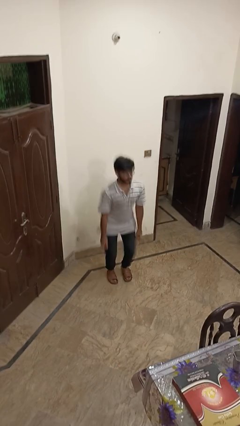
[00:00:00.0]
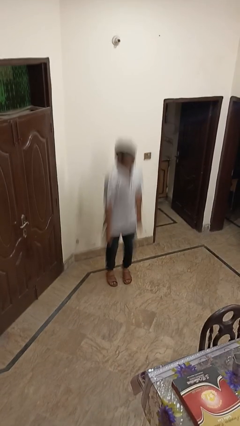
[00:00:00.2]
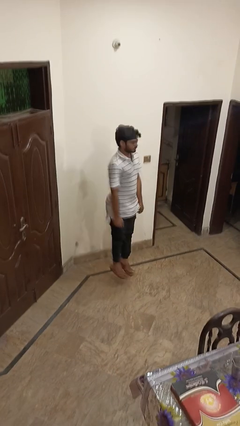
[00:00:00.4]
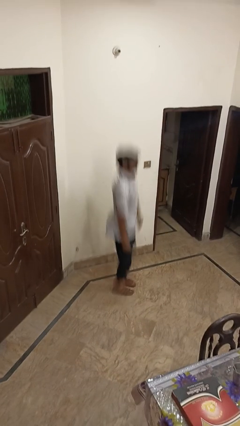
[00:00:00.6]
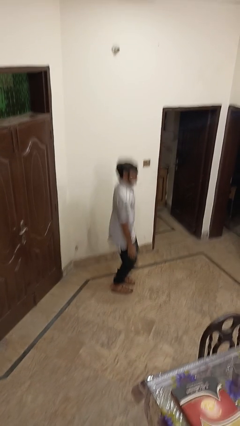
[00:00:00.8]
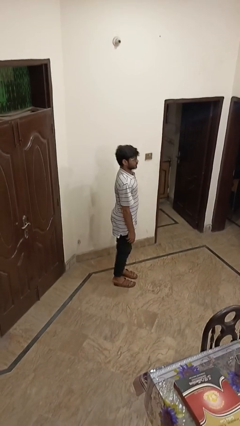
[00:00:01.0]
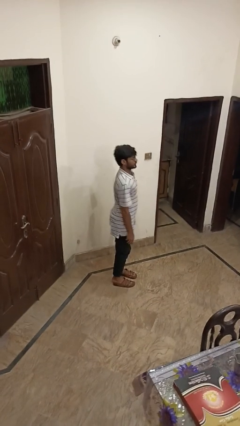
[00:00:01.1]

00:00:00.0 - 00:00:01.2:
person jumps

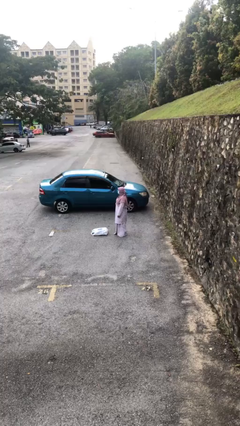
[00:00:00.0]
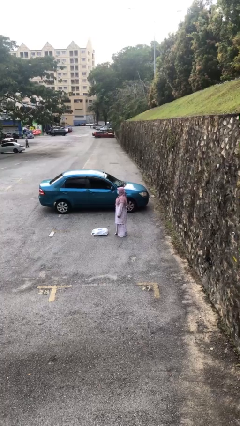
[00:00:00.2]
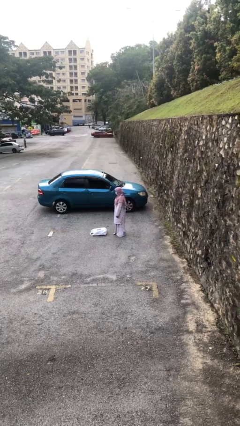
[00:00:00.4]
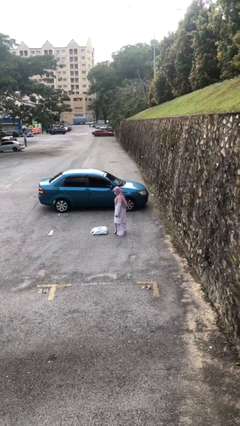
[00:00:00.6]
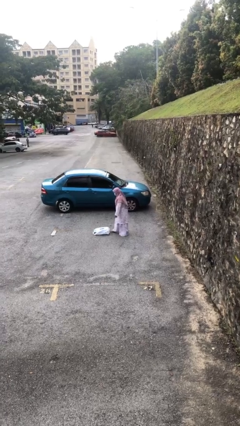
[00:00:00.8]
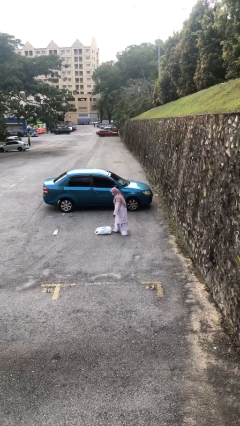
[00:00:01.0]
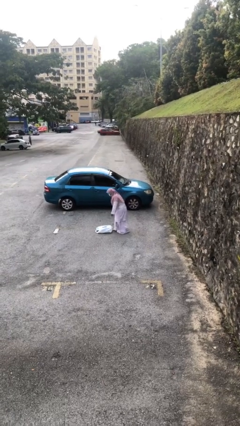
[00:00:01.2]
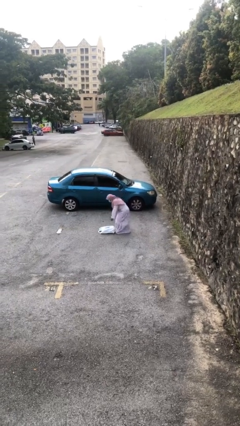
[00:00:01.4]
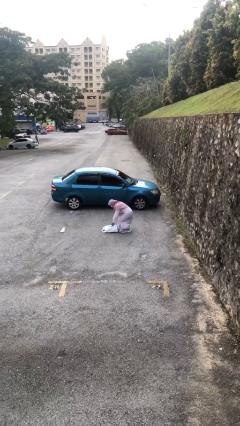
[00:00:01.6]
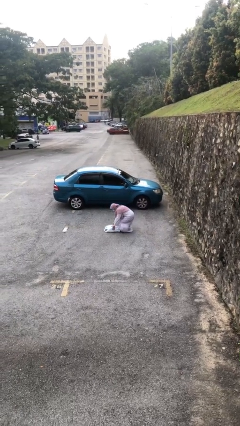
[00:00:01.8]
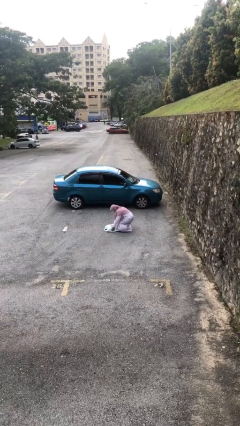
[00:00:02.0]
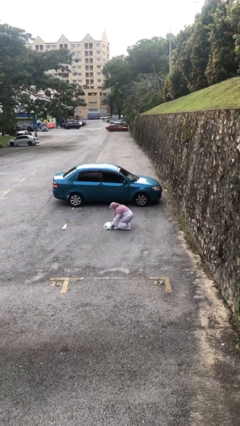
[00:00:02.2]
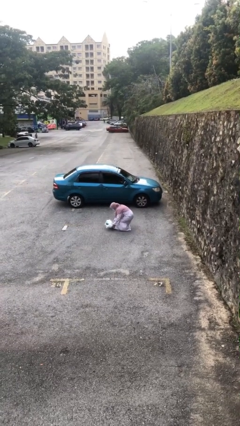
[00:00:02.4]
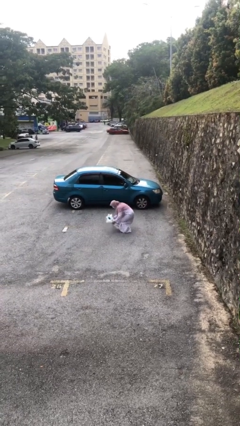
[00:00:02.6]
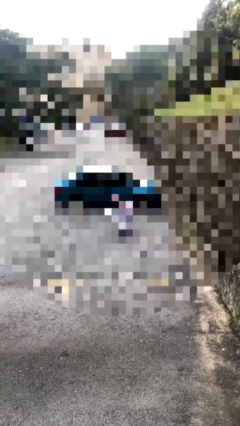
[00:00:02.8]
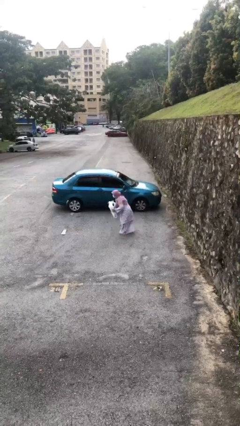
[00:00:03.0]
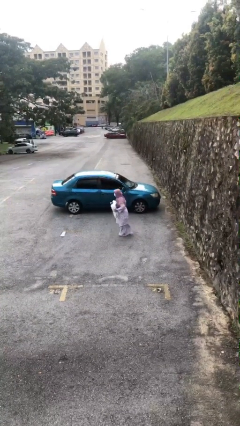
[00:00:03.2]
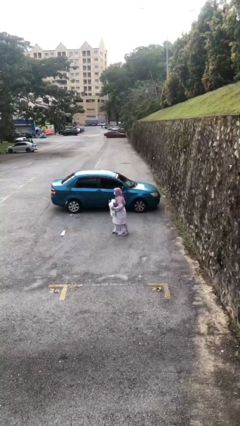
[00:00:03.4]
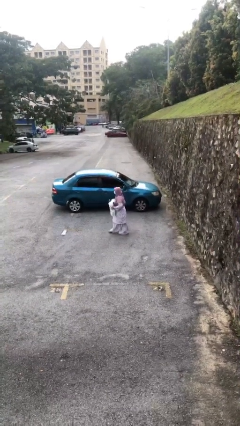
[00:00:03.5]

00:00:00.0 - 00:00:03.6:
person picks up object from floor

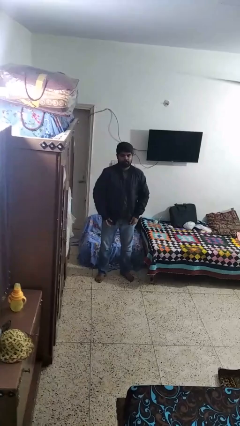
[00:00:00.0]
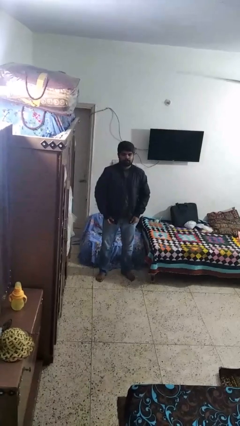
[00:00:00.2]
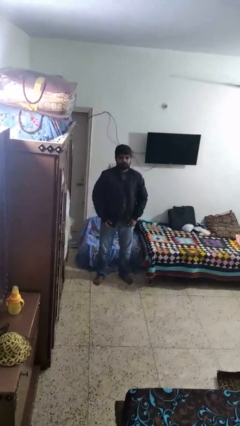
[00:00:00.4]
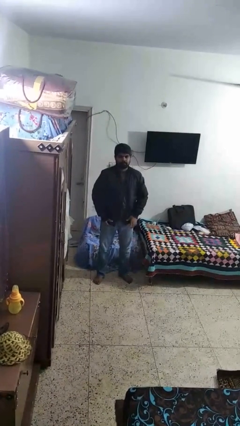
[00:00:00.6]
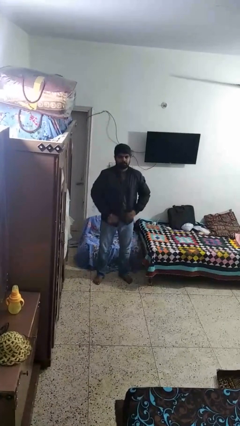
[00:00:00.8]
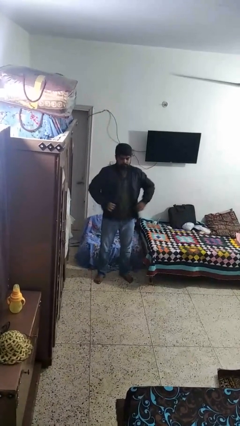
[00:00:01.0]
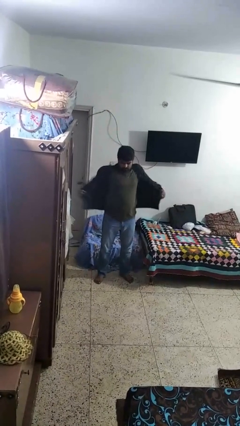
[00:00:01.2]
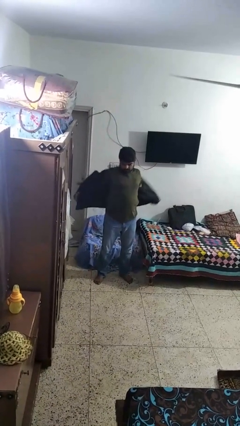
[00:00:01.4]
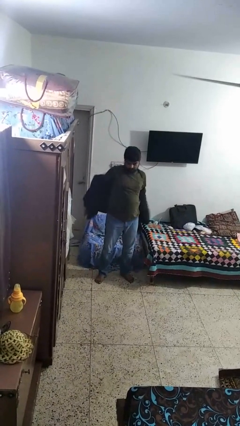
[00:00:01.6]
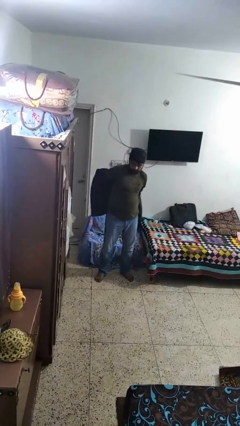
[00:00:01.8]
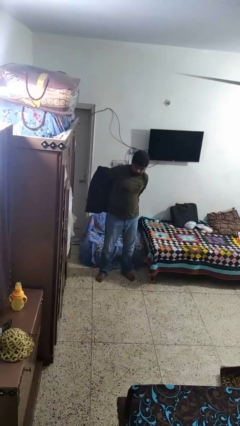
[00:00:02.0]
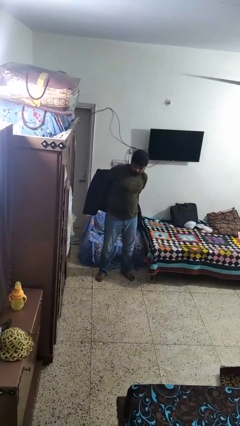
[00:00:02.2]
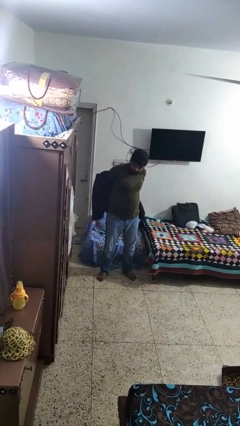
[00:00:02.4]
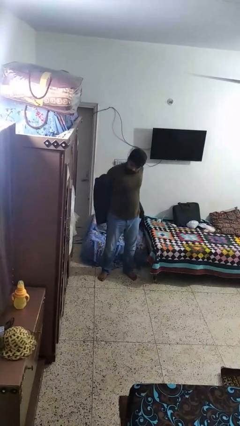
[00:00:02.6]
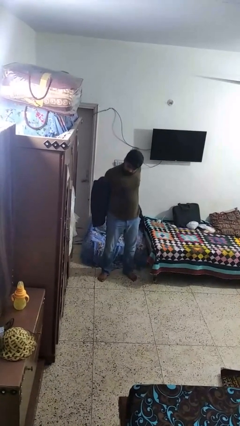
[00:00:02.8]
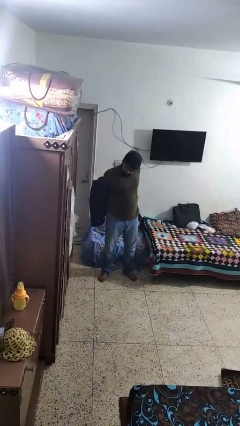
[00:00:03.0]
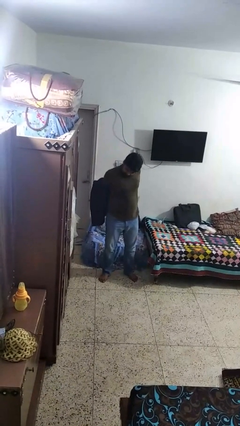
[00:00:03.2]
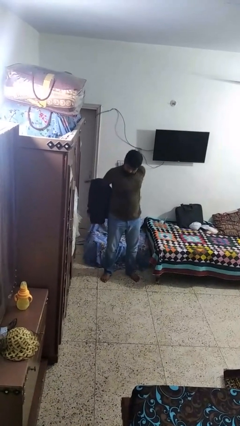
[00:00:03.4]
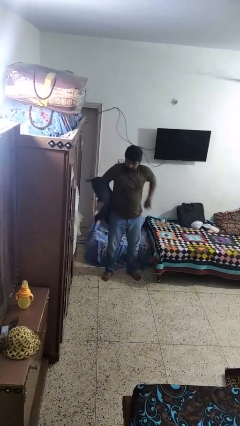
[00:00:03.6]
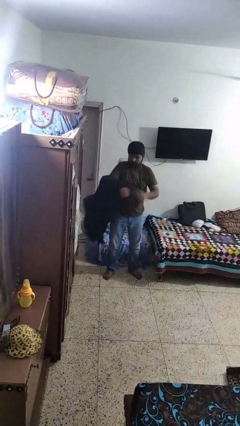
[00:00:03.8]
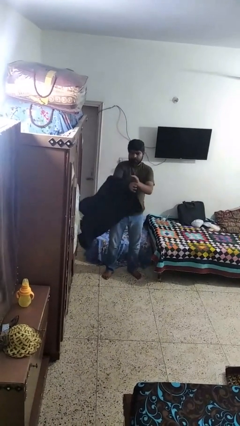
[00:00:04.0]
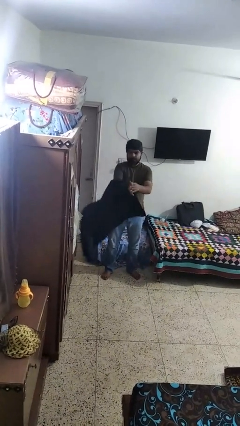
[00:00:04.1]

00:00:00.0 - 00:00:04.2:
person takes off jacket

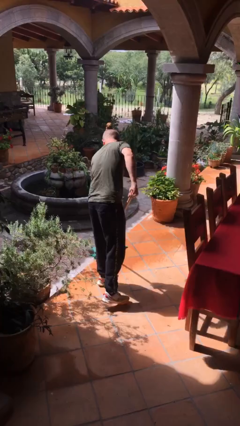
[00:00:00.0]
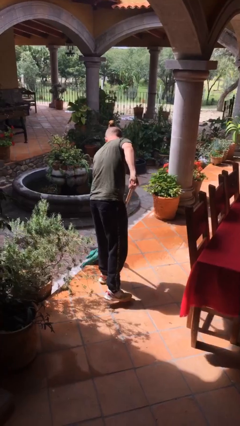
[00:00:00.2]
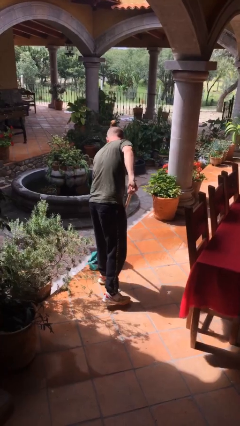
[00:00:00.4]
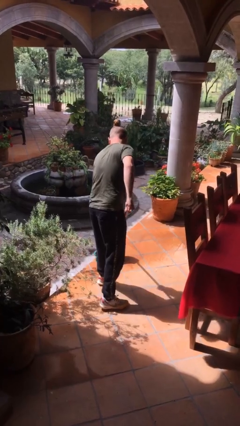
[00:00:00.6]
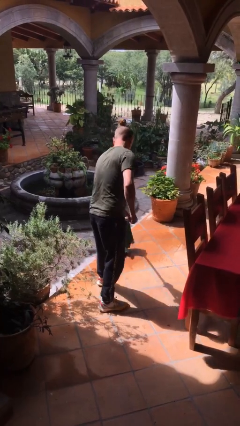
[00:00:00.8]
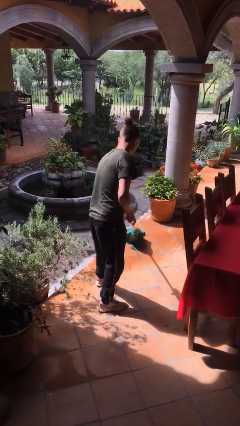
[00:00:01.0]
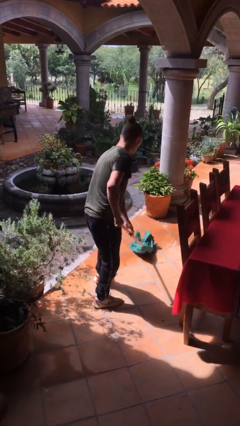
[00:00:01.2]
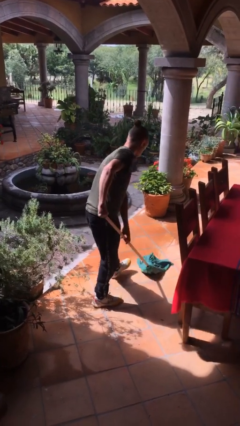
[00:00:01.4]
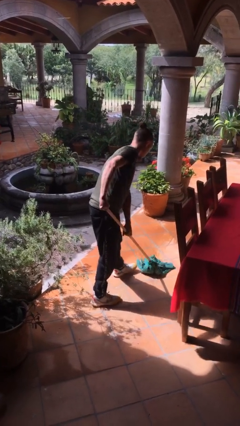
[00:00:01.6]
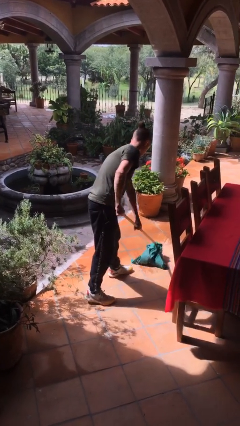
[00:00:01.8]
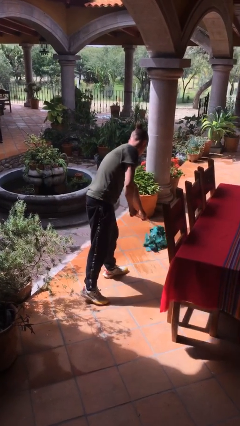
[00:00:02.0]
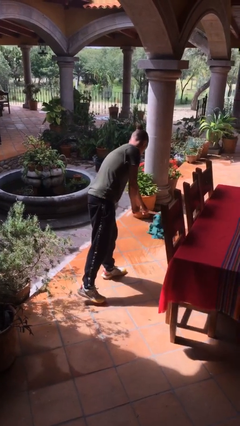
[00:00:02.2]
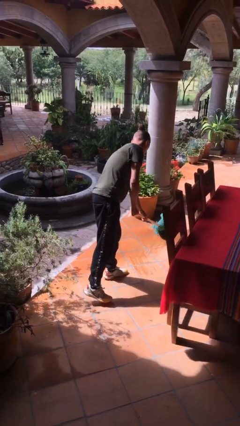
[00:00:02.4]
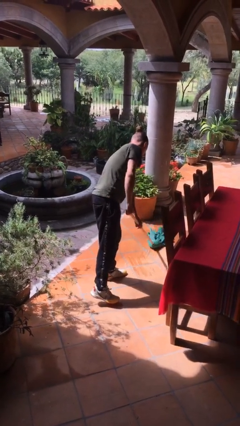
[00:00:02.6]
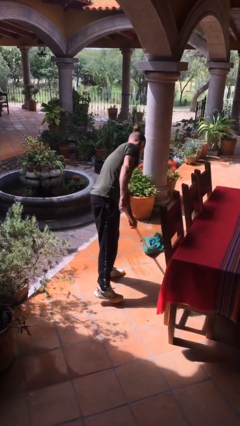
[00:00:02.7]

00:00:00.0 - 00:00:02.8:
person mops

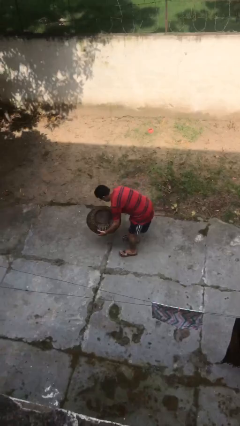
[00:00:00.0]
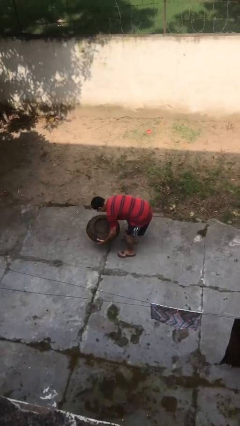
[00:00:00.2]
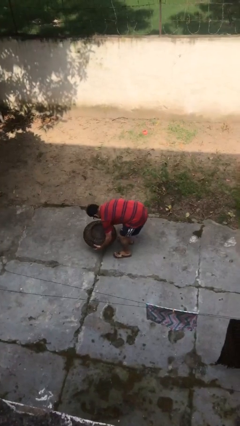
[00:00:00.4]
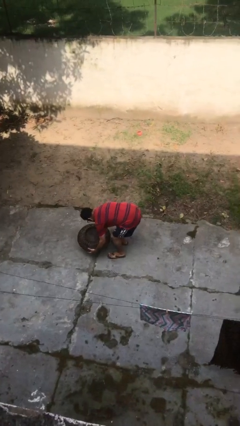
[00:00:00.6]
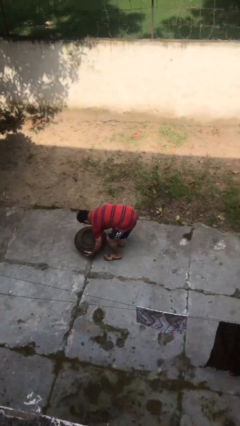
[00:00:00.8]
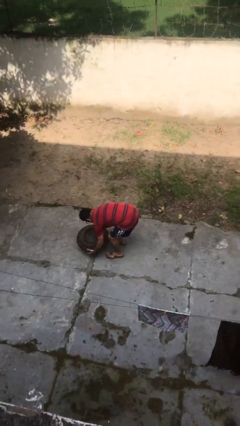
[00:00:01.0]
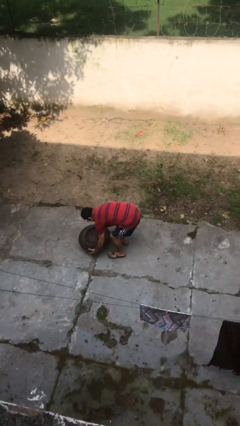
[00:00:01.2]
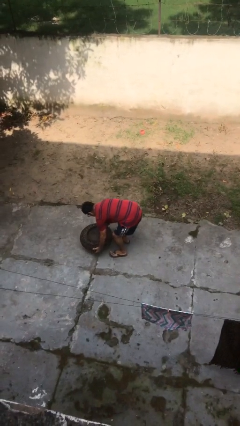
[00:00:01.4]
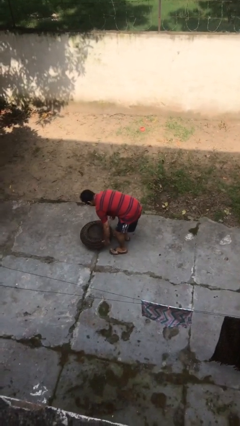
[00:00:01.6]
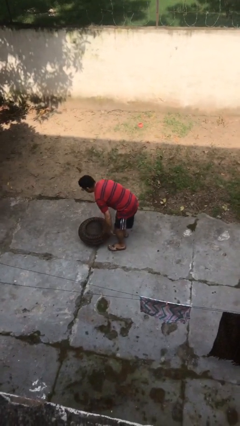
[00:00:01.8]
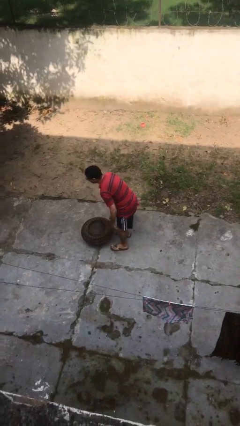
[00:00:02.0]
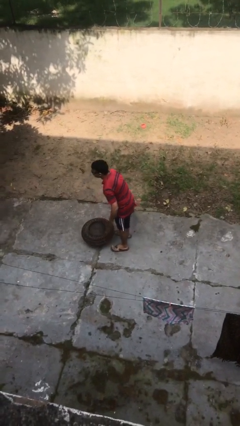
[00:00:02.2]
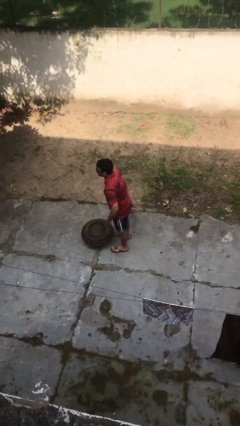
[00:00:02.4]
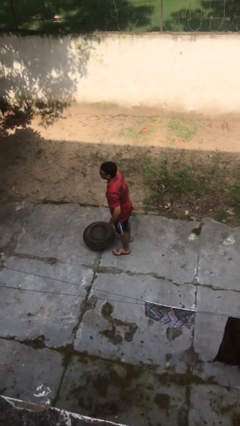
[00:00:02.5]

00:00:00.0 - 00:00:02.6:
person puts down object on floor

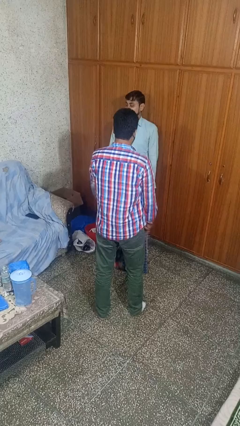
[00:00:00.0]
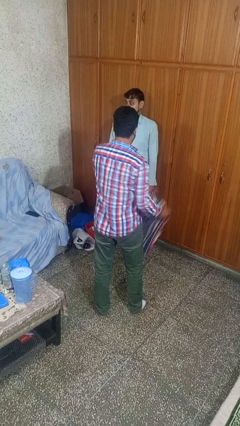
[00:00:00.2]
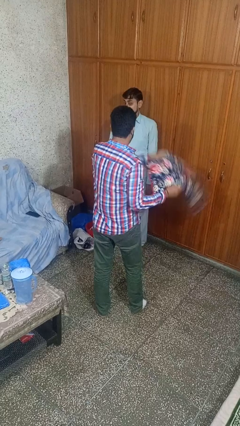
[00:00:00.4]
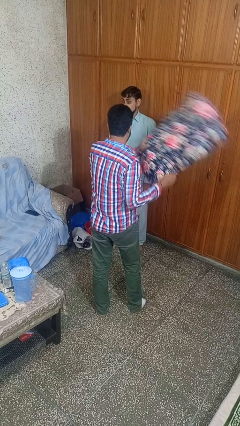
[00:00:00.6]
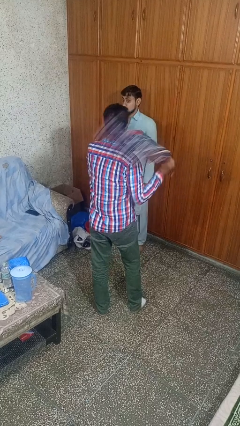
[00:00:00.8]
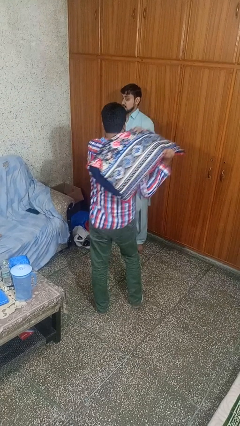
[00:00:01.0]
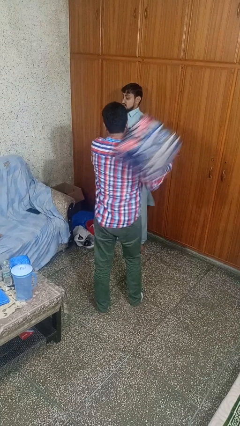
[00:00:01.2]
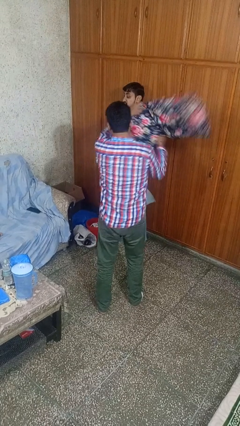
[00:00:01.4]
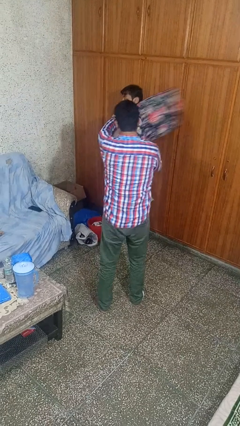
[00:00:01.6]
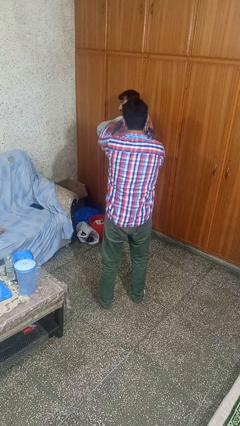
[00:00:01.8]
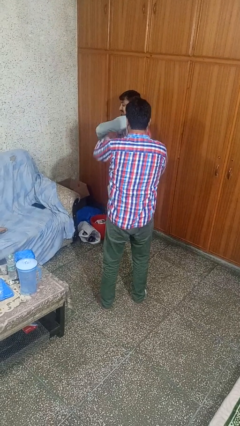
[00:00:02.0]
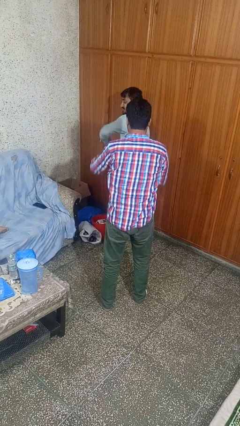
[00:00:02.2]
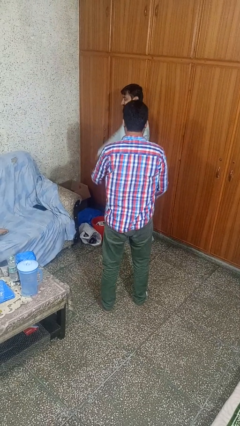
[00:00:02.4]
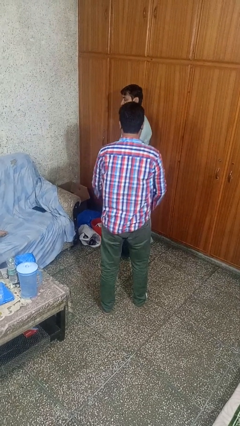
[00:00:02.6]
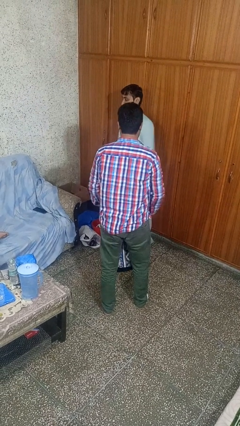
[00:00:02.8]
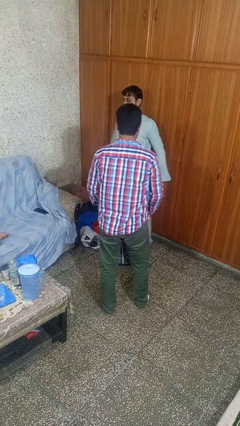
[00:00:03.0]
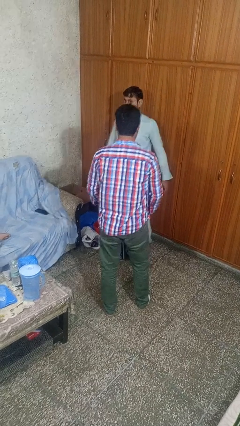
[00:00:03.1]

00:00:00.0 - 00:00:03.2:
person hits person with pillow
